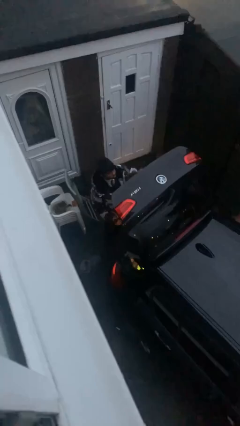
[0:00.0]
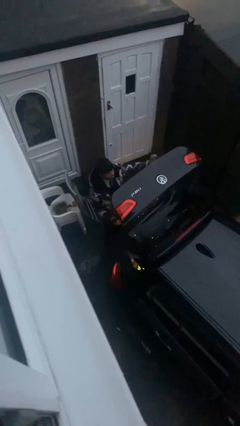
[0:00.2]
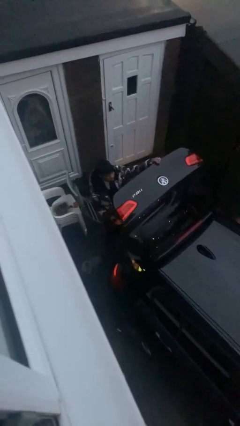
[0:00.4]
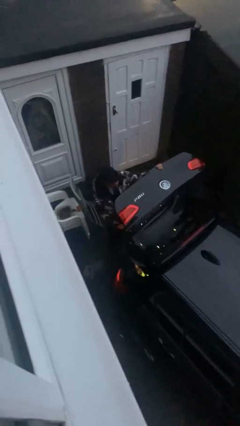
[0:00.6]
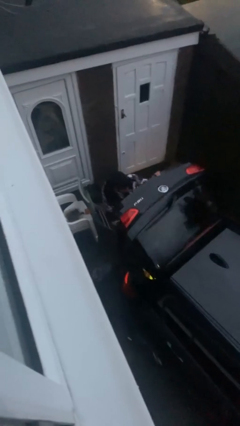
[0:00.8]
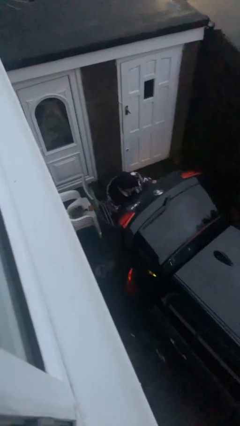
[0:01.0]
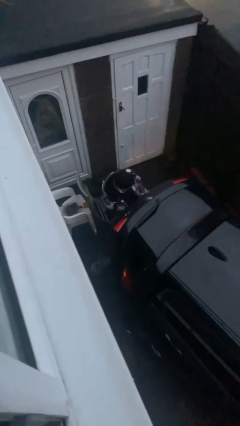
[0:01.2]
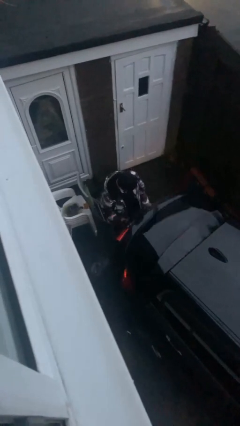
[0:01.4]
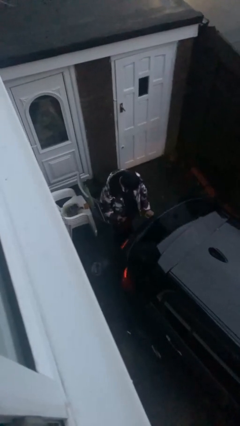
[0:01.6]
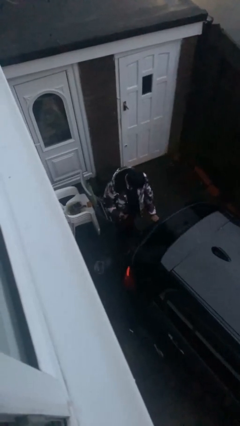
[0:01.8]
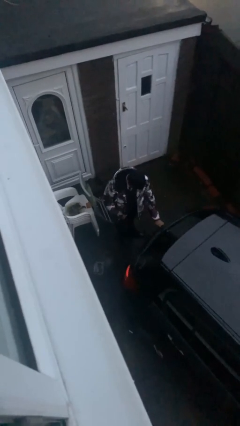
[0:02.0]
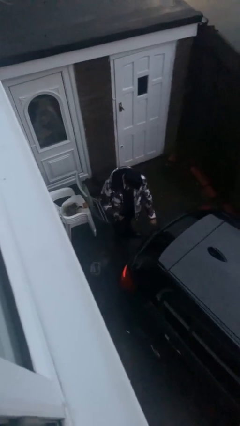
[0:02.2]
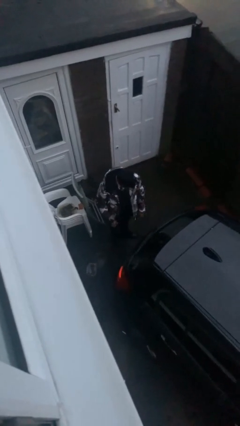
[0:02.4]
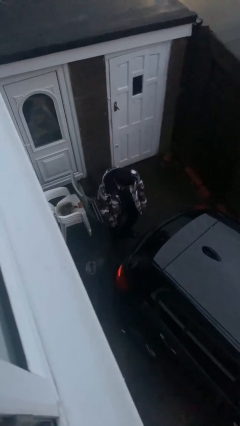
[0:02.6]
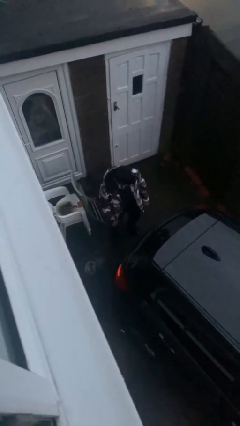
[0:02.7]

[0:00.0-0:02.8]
person closes car trunk

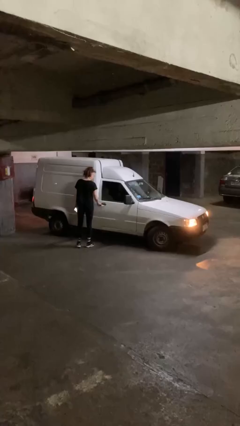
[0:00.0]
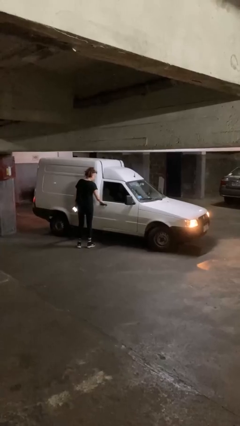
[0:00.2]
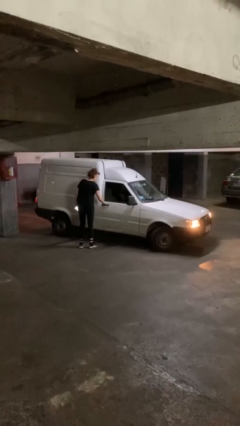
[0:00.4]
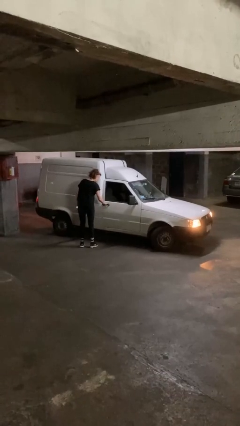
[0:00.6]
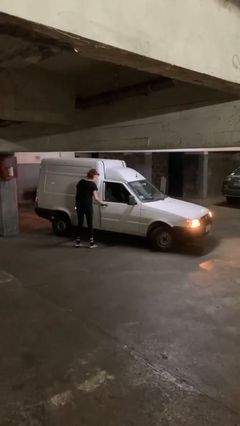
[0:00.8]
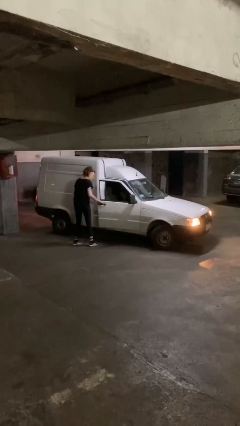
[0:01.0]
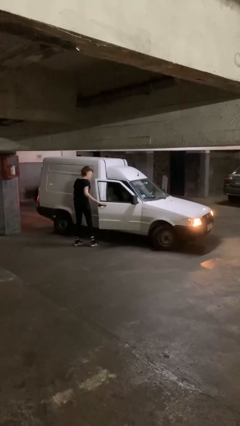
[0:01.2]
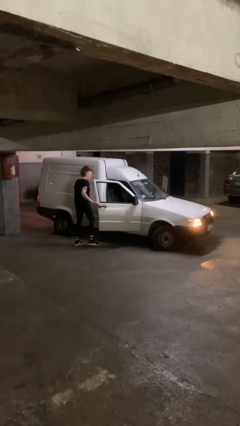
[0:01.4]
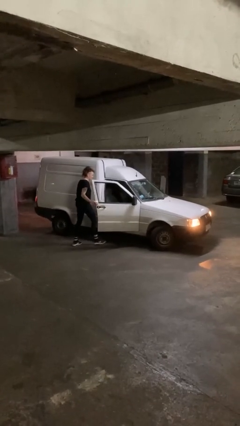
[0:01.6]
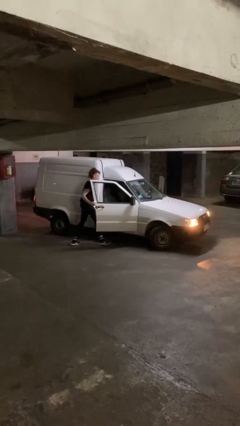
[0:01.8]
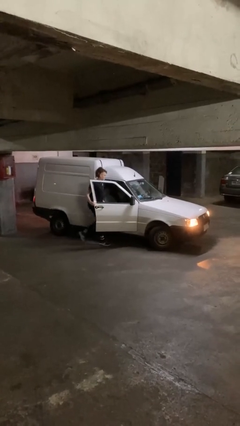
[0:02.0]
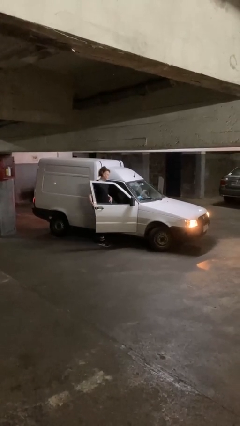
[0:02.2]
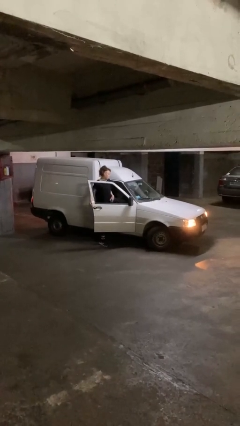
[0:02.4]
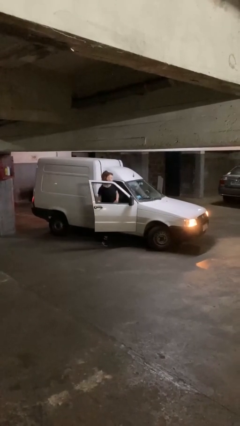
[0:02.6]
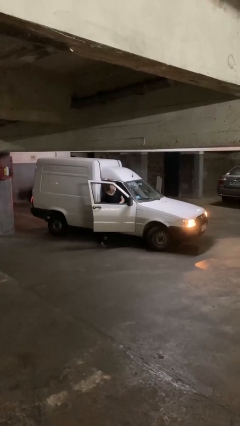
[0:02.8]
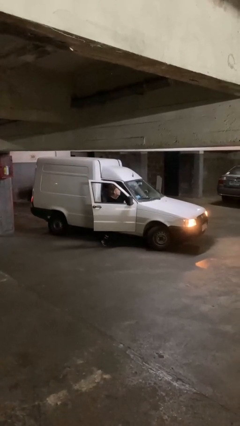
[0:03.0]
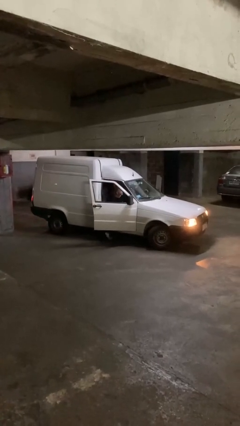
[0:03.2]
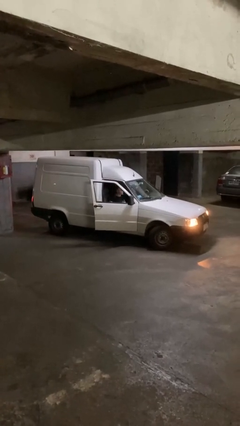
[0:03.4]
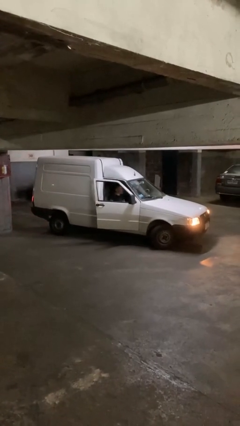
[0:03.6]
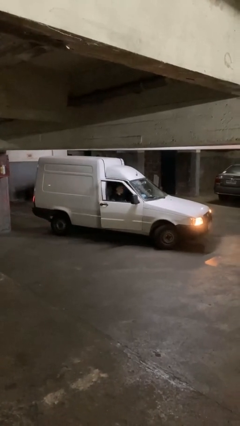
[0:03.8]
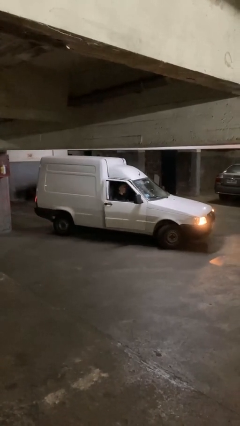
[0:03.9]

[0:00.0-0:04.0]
car picks up person

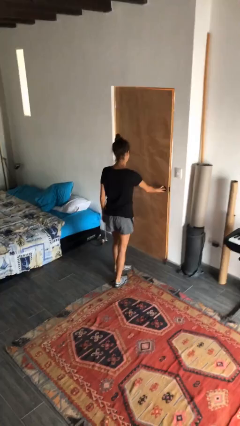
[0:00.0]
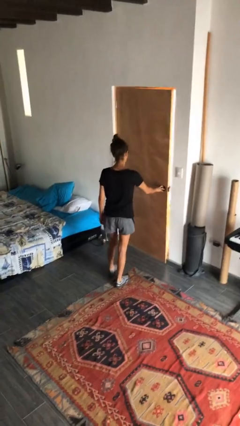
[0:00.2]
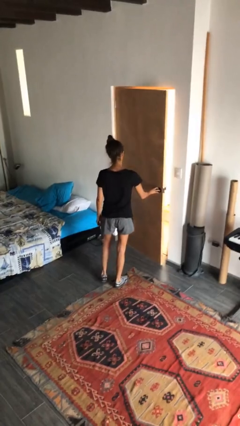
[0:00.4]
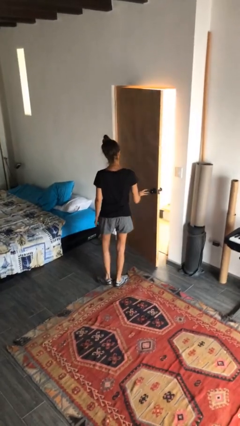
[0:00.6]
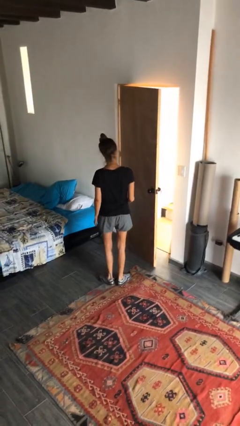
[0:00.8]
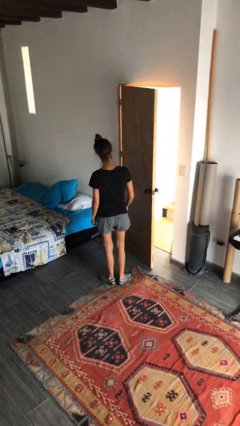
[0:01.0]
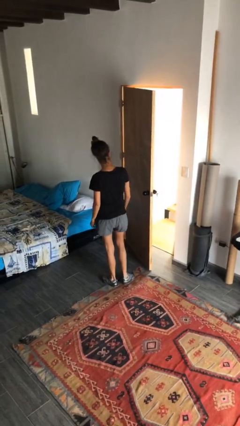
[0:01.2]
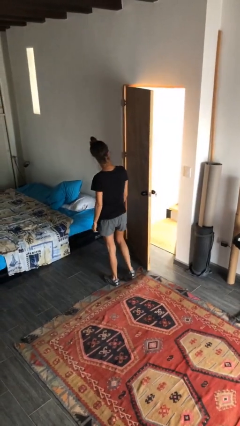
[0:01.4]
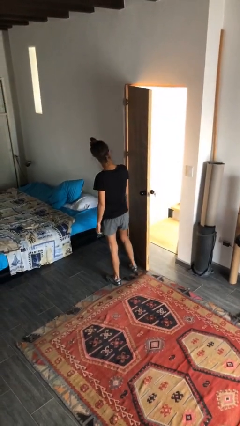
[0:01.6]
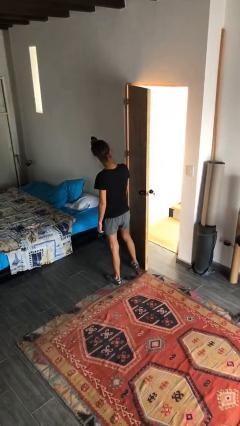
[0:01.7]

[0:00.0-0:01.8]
person opens facility door

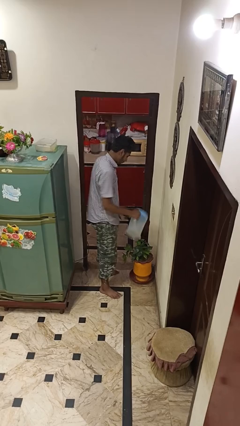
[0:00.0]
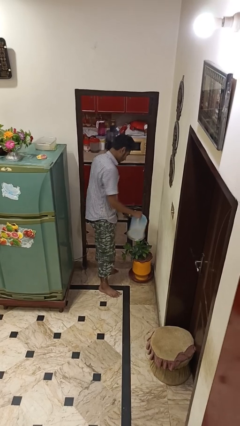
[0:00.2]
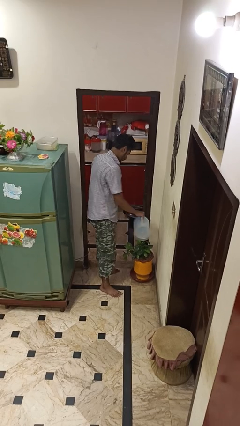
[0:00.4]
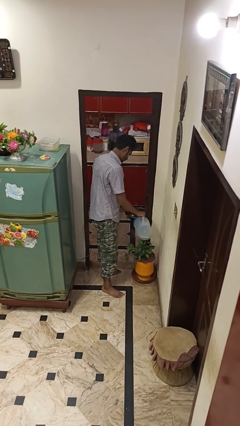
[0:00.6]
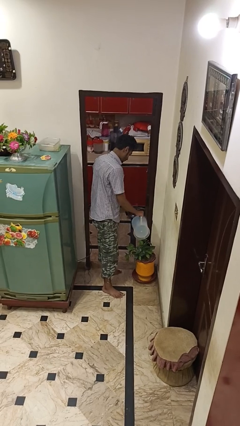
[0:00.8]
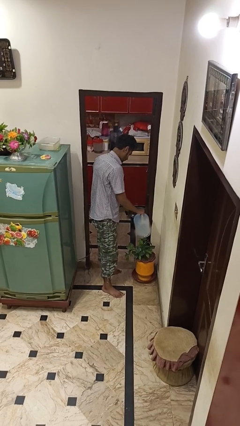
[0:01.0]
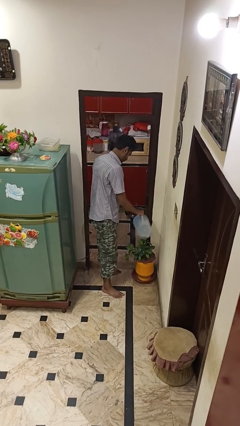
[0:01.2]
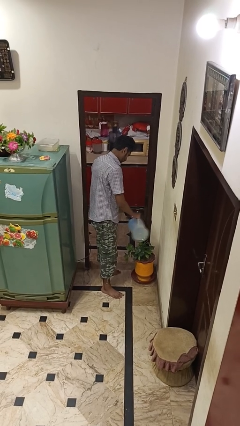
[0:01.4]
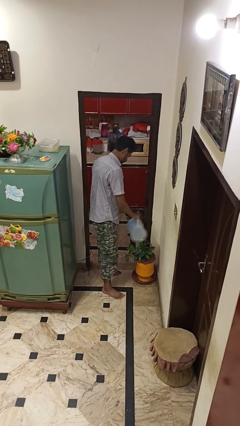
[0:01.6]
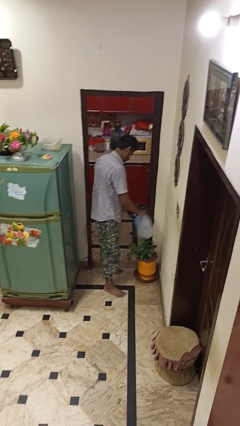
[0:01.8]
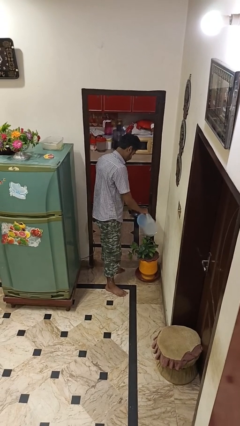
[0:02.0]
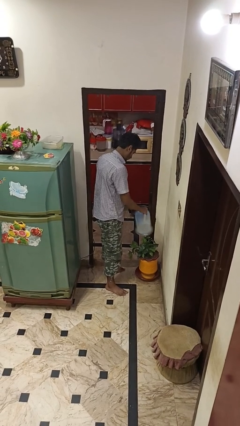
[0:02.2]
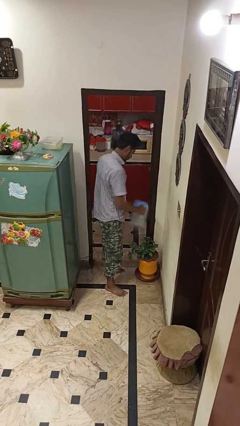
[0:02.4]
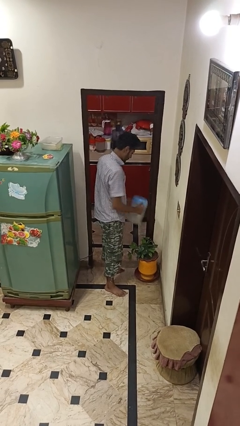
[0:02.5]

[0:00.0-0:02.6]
person waters houseplant

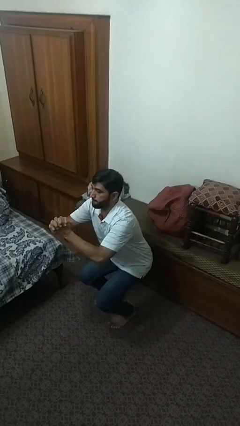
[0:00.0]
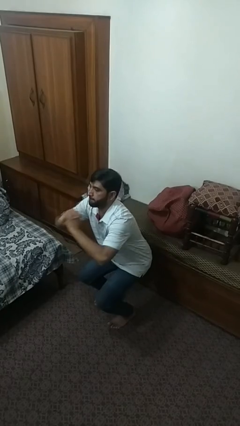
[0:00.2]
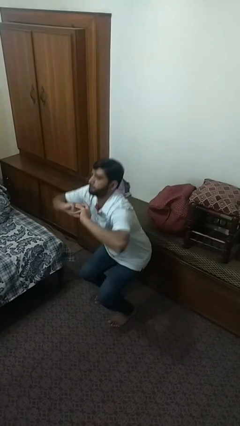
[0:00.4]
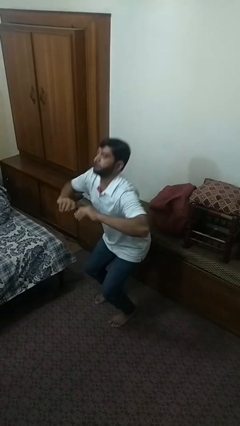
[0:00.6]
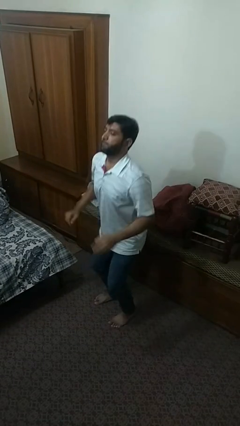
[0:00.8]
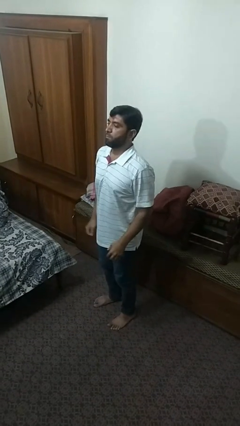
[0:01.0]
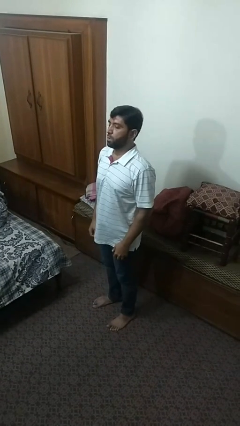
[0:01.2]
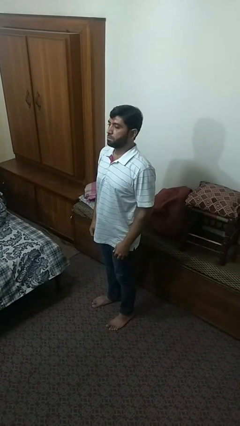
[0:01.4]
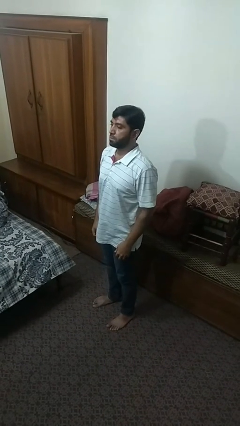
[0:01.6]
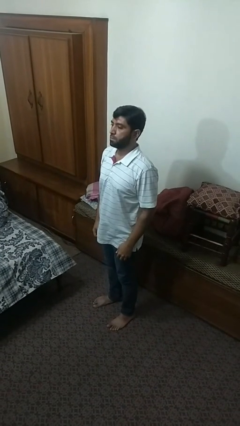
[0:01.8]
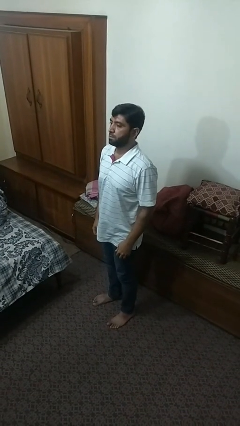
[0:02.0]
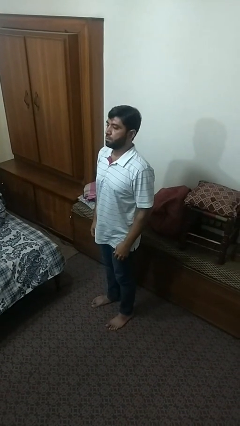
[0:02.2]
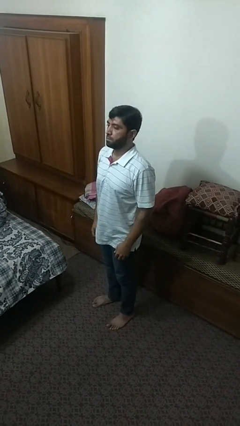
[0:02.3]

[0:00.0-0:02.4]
person stands up

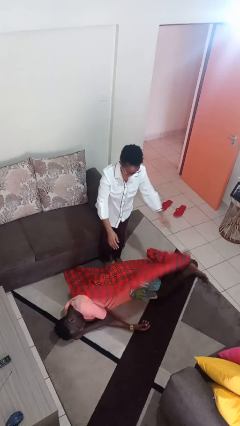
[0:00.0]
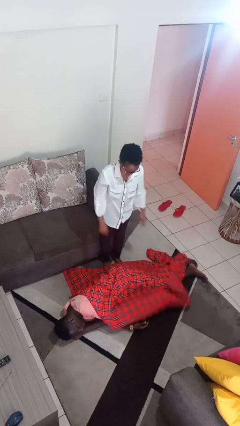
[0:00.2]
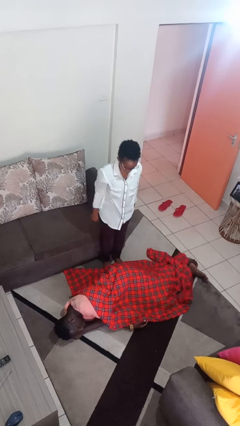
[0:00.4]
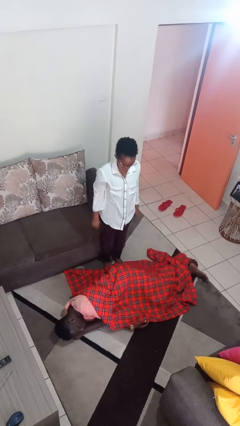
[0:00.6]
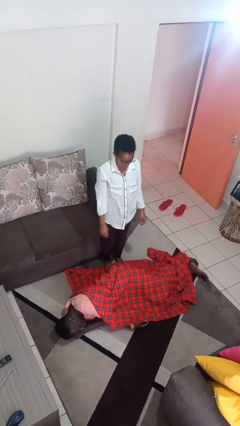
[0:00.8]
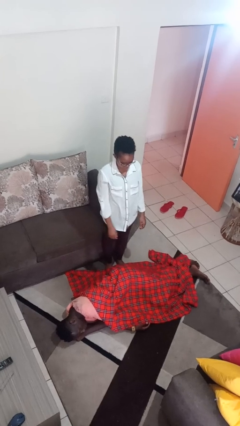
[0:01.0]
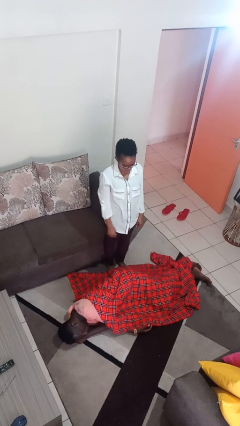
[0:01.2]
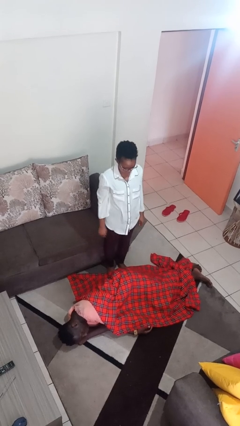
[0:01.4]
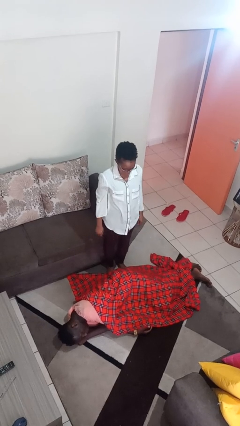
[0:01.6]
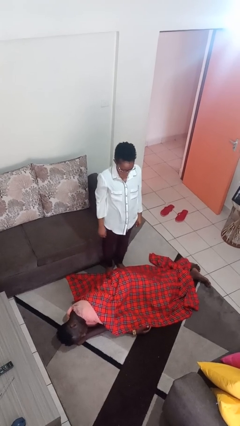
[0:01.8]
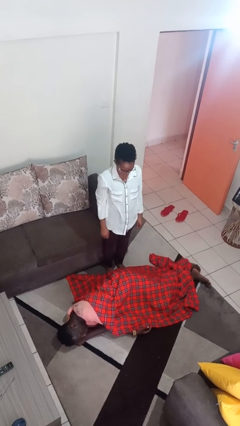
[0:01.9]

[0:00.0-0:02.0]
person covers friend with blanket

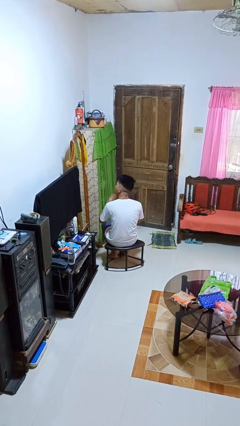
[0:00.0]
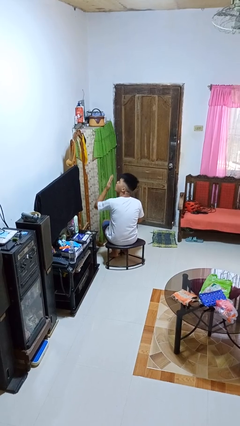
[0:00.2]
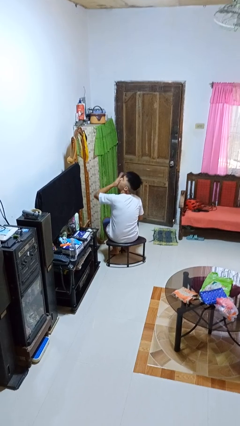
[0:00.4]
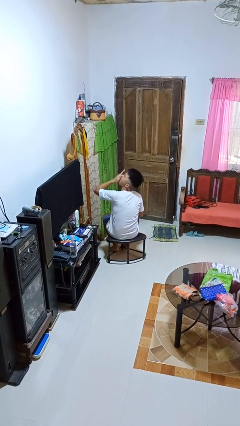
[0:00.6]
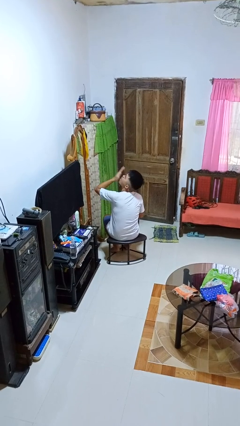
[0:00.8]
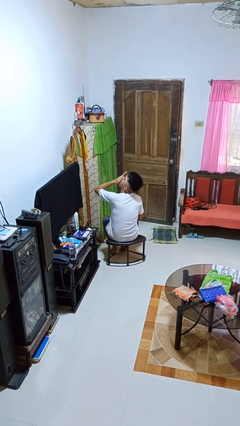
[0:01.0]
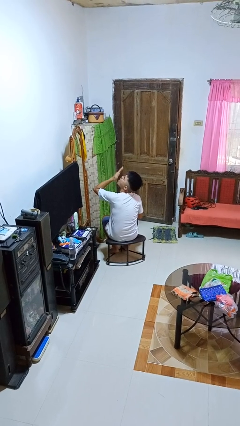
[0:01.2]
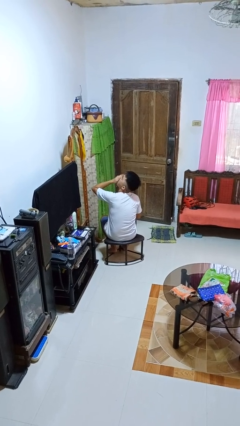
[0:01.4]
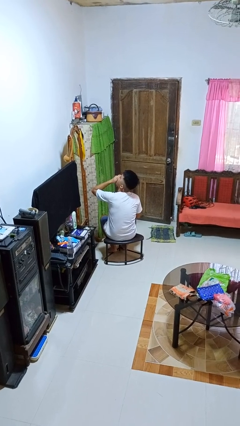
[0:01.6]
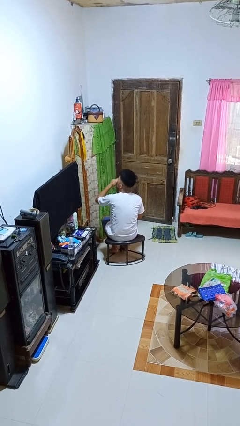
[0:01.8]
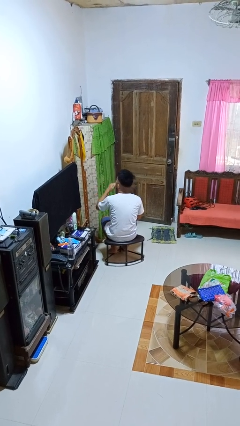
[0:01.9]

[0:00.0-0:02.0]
person yawns
